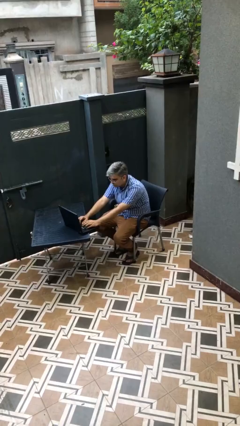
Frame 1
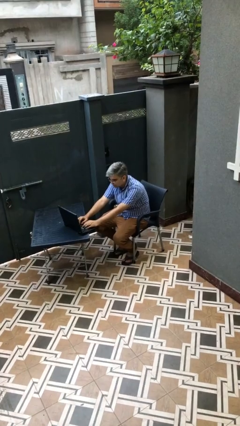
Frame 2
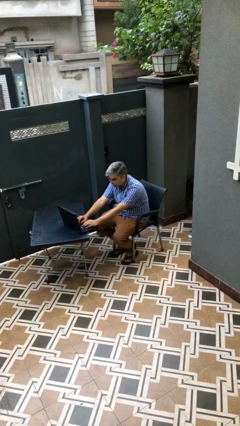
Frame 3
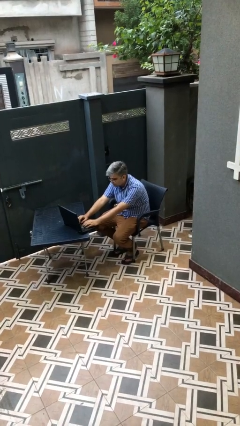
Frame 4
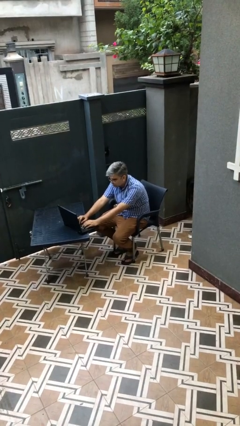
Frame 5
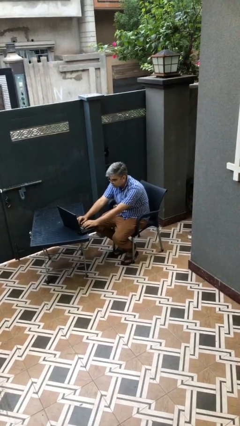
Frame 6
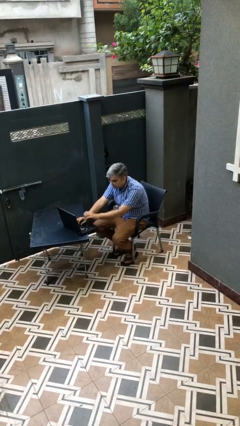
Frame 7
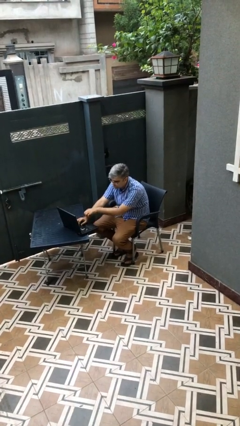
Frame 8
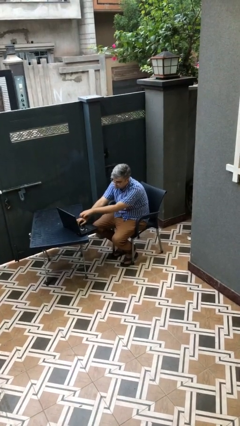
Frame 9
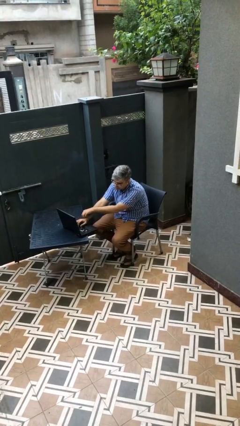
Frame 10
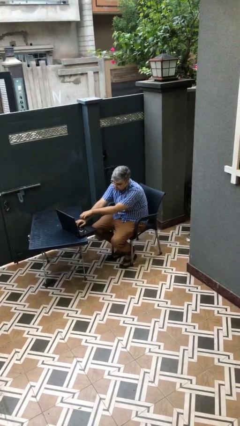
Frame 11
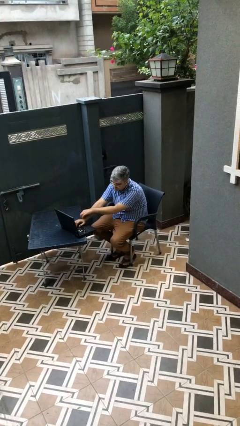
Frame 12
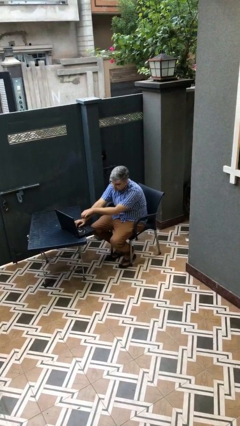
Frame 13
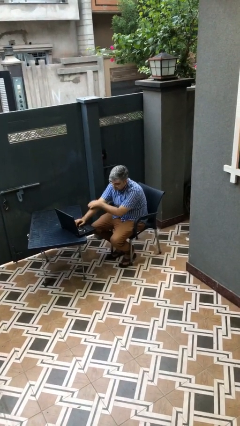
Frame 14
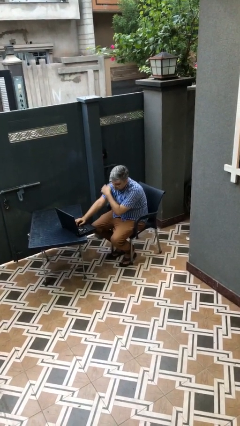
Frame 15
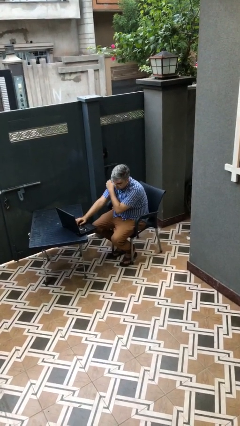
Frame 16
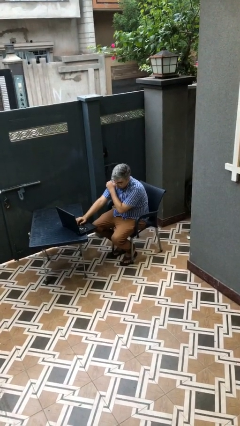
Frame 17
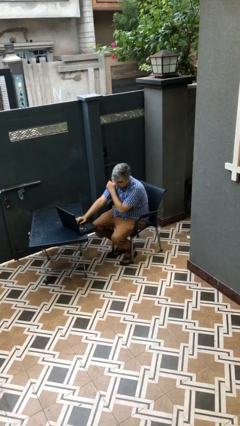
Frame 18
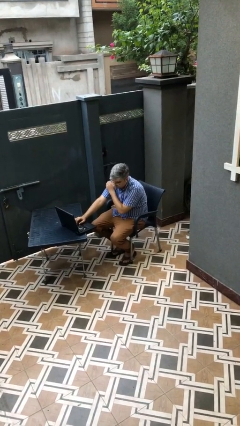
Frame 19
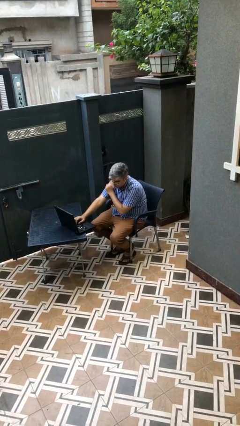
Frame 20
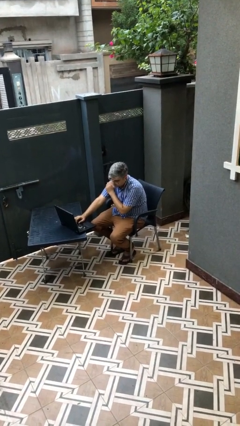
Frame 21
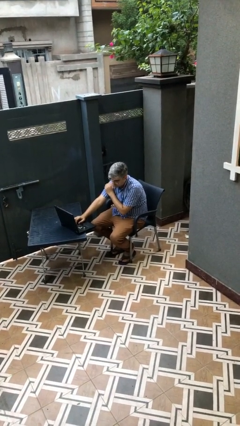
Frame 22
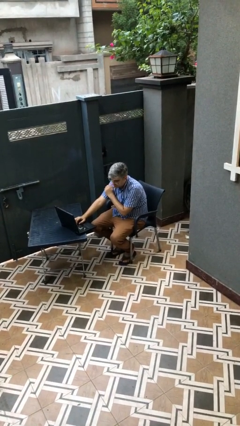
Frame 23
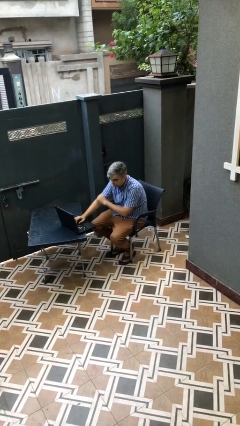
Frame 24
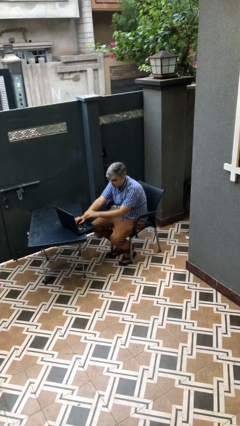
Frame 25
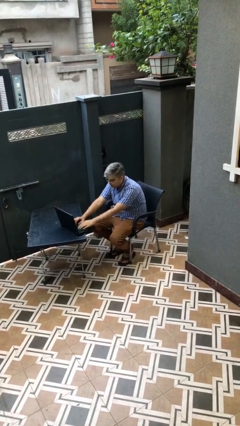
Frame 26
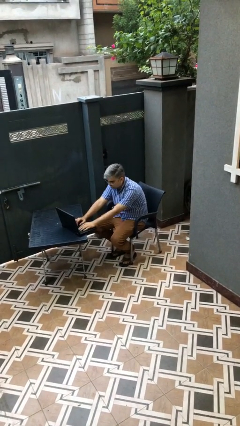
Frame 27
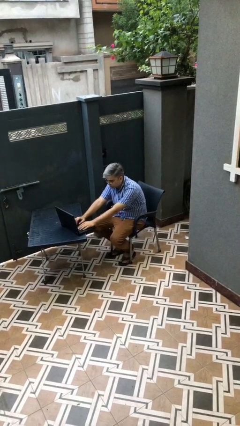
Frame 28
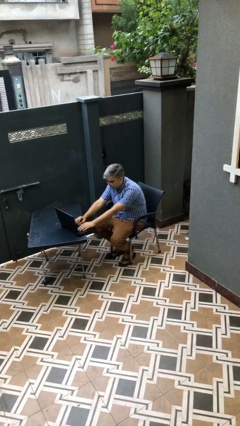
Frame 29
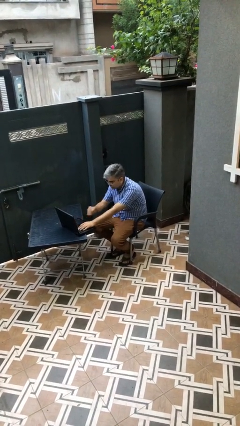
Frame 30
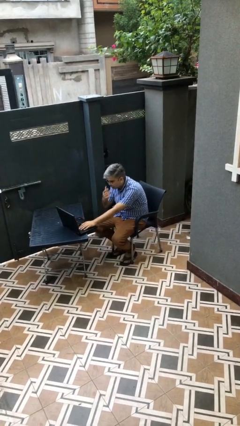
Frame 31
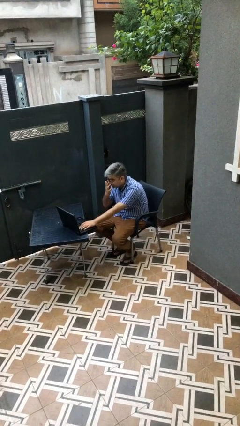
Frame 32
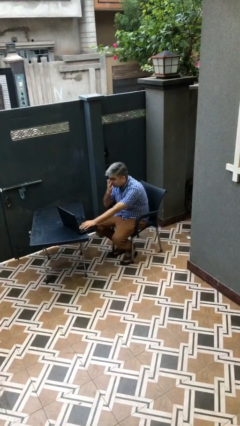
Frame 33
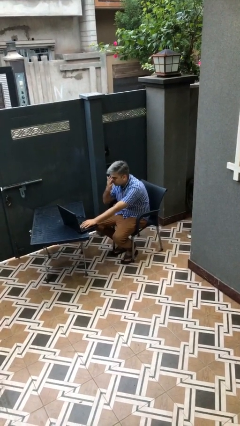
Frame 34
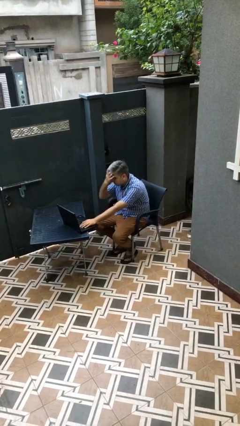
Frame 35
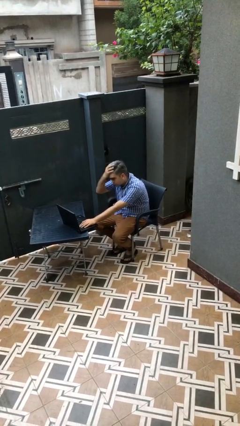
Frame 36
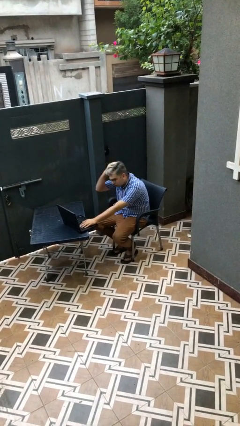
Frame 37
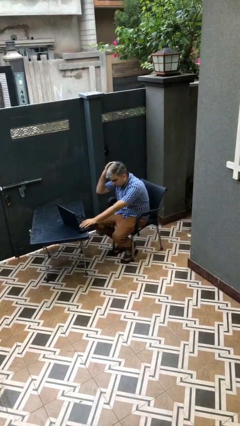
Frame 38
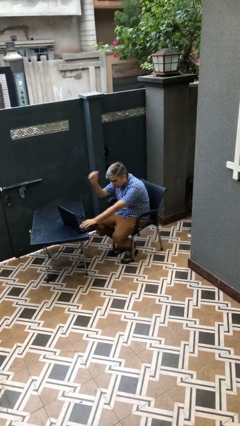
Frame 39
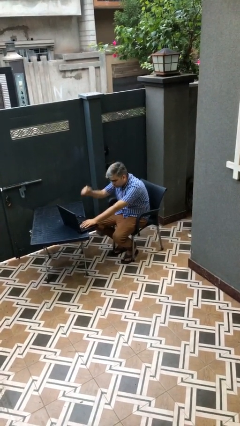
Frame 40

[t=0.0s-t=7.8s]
person interacts with laptop

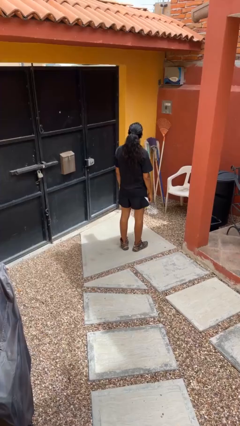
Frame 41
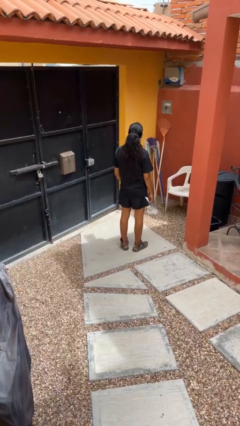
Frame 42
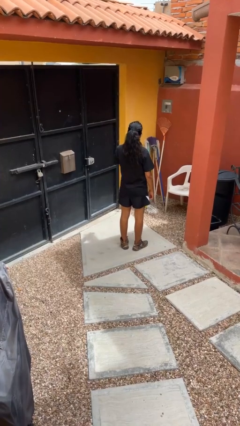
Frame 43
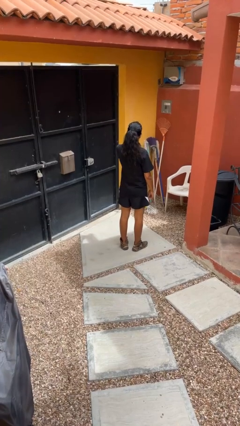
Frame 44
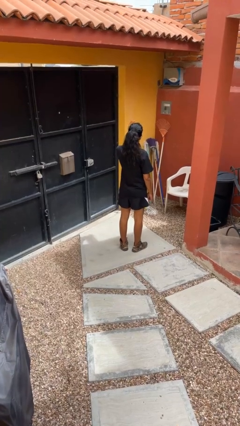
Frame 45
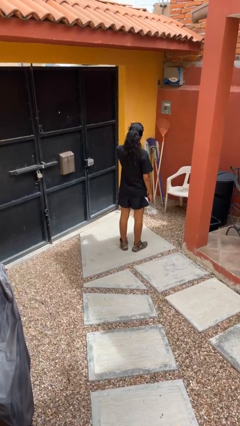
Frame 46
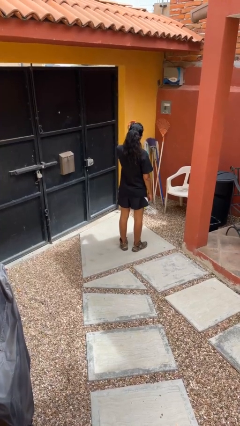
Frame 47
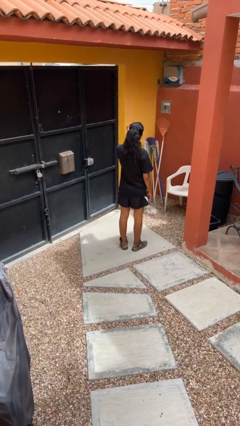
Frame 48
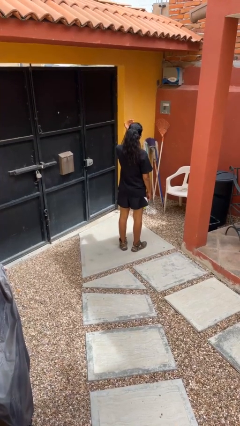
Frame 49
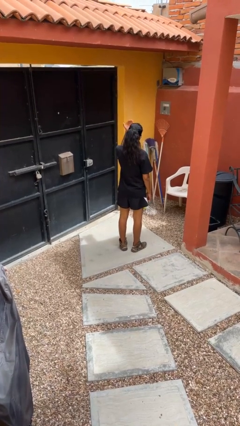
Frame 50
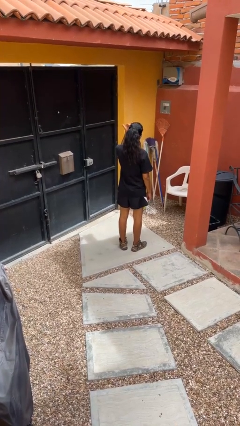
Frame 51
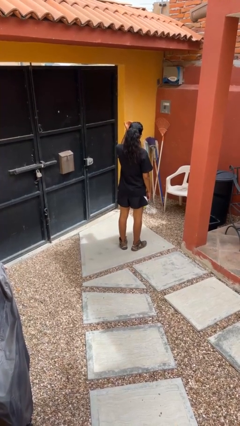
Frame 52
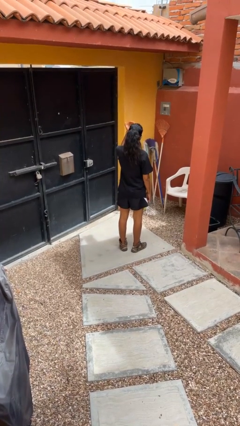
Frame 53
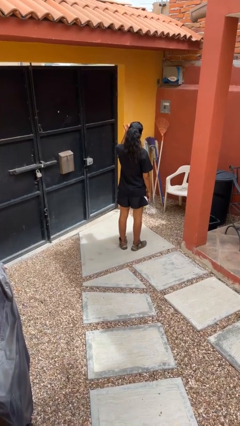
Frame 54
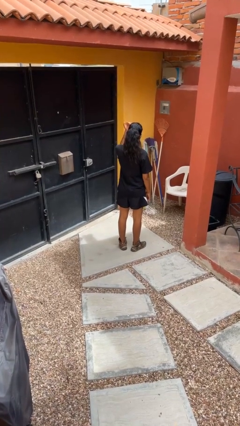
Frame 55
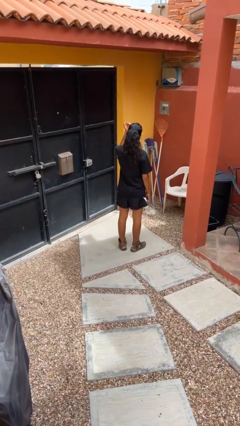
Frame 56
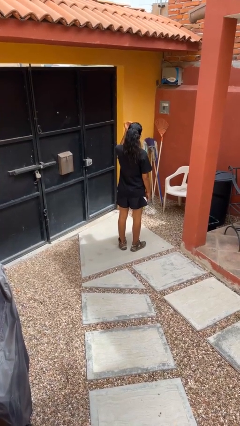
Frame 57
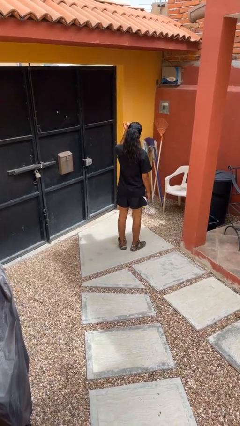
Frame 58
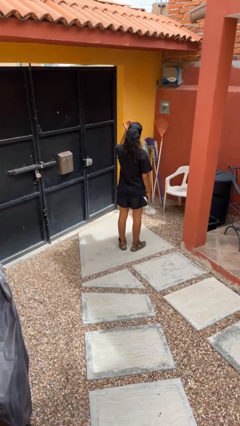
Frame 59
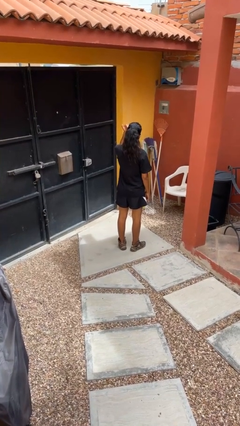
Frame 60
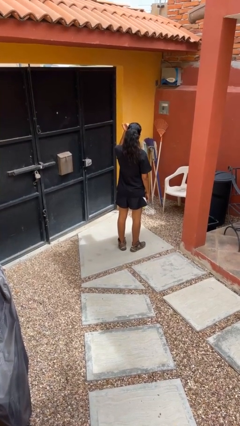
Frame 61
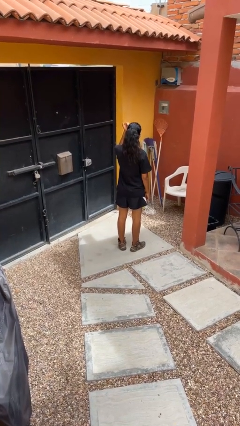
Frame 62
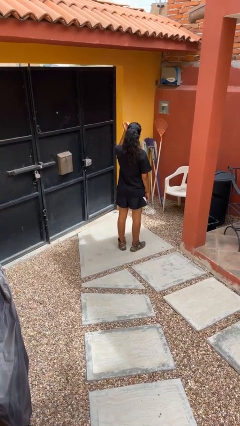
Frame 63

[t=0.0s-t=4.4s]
person gestures come here

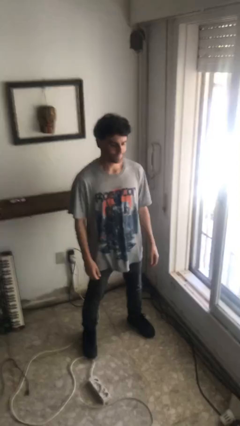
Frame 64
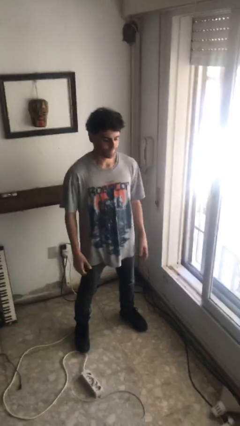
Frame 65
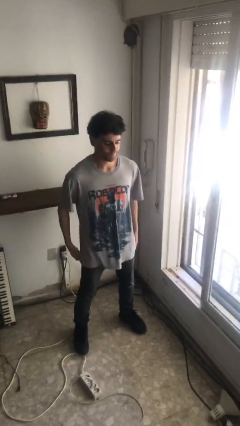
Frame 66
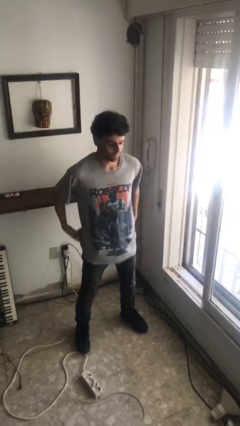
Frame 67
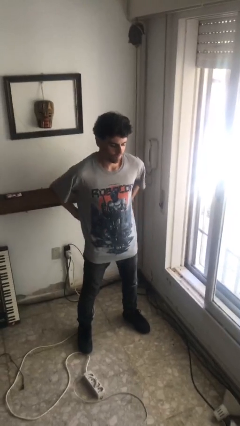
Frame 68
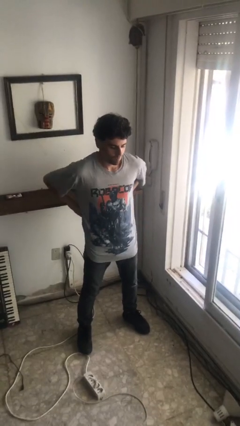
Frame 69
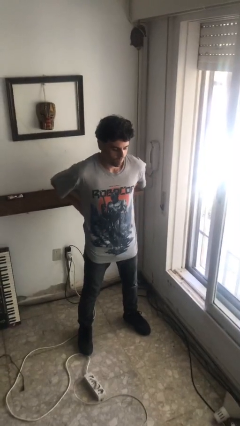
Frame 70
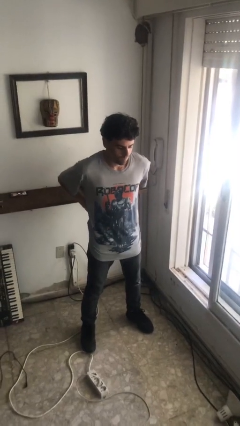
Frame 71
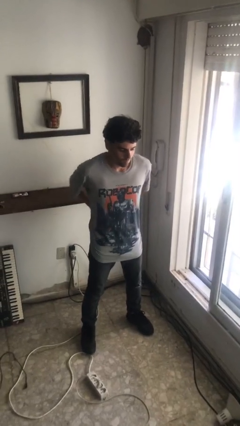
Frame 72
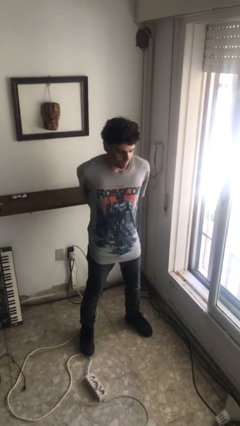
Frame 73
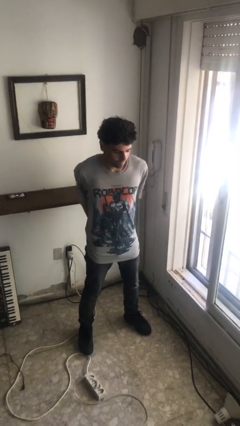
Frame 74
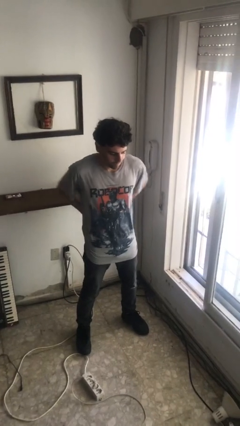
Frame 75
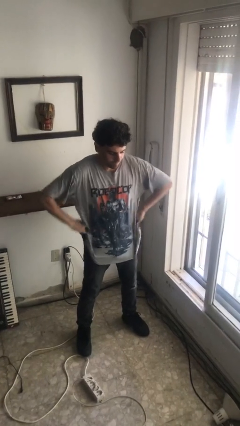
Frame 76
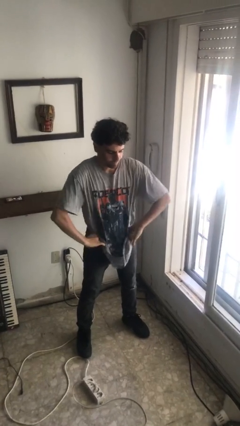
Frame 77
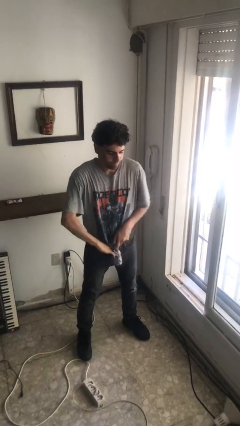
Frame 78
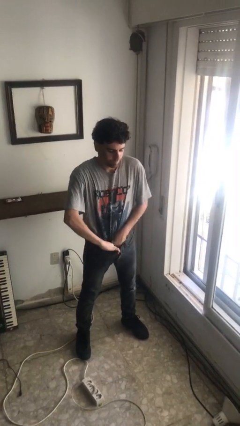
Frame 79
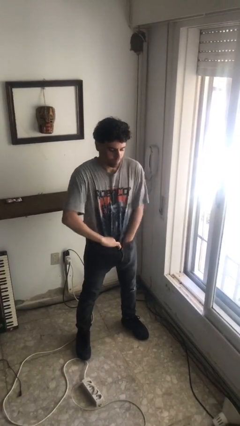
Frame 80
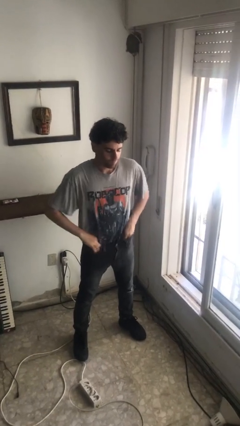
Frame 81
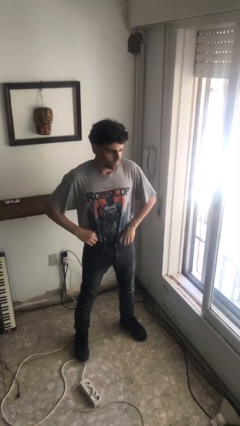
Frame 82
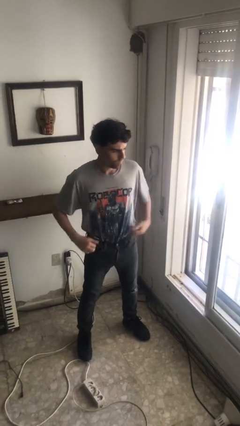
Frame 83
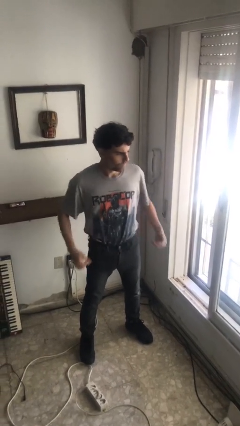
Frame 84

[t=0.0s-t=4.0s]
person tucks in shirt

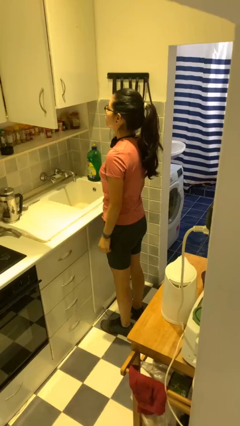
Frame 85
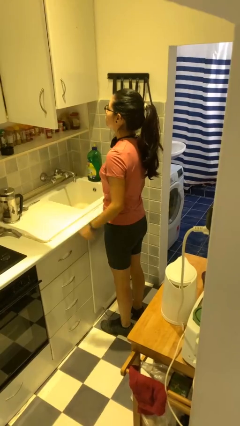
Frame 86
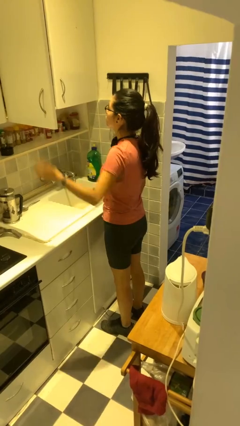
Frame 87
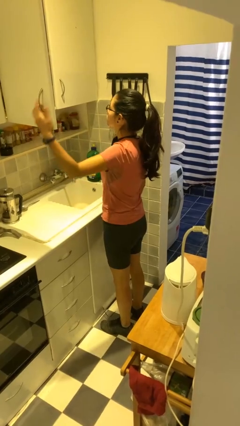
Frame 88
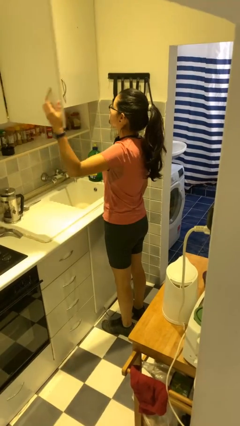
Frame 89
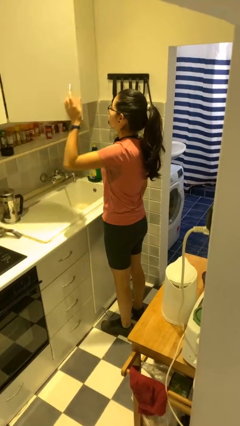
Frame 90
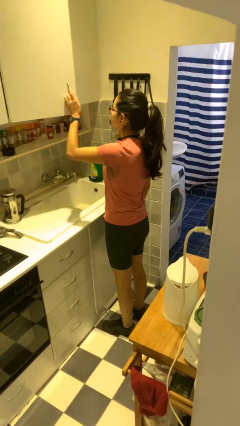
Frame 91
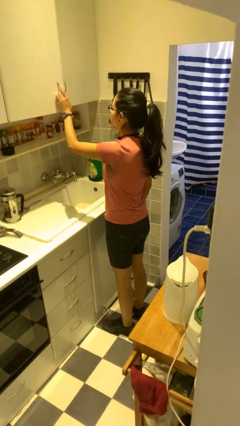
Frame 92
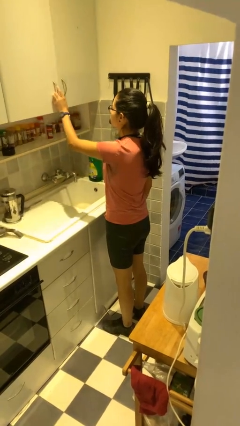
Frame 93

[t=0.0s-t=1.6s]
person closes cabinet

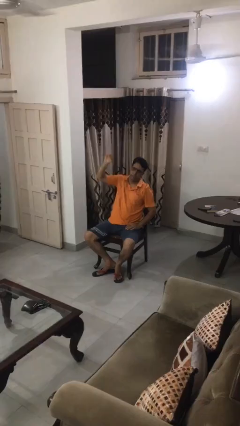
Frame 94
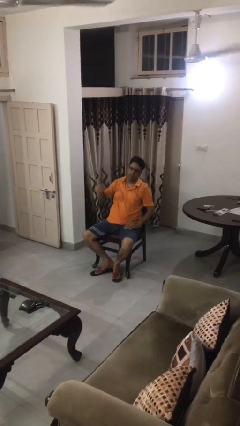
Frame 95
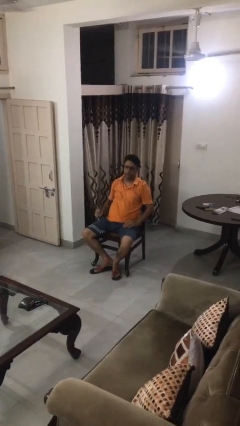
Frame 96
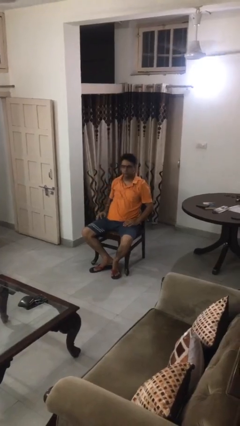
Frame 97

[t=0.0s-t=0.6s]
person gestures lower hand
